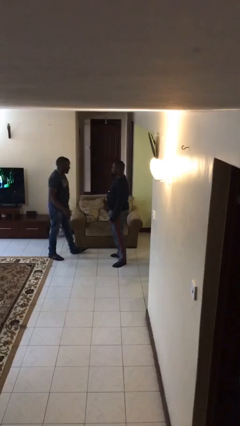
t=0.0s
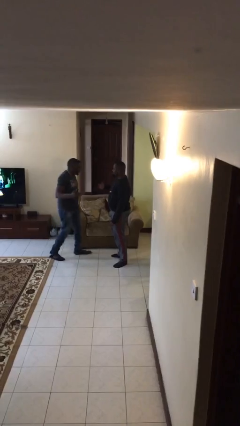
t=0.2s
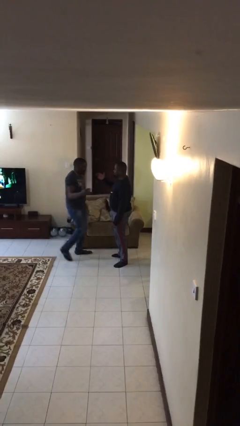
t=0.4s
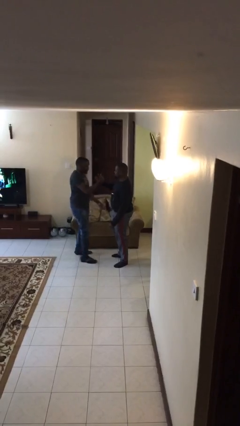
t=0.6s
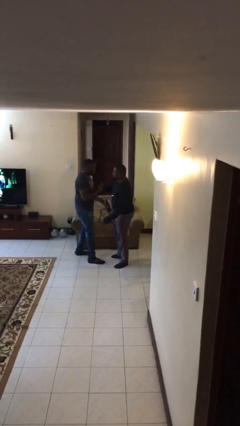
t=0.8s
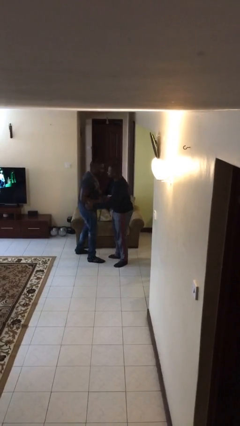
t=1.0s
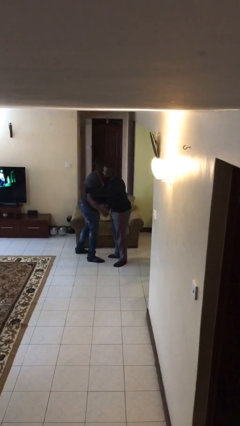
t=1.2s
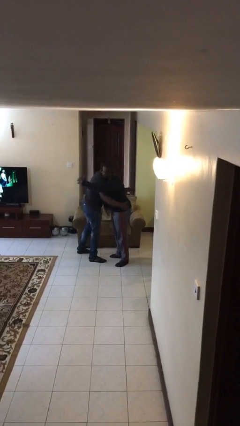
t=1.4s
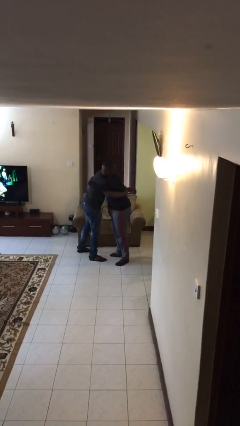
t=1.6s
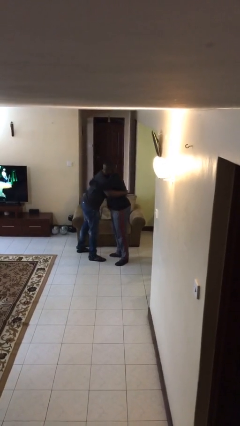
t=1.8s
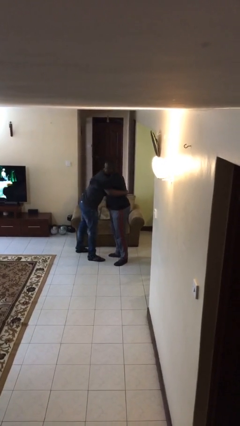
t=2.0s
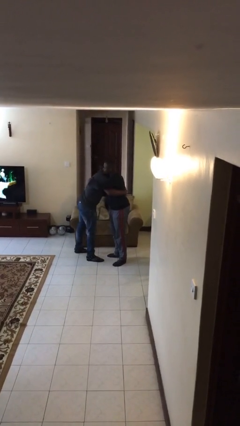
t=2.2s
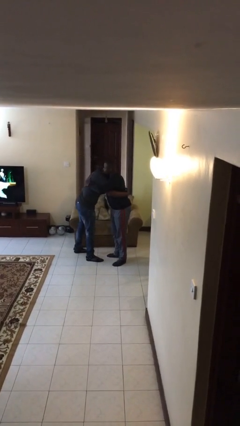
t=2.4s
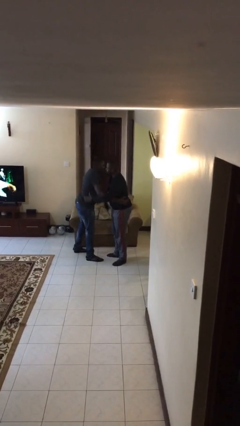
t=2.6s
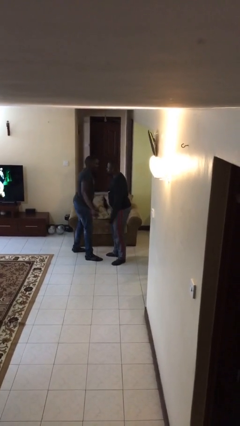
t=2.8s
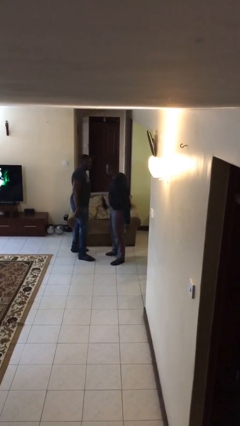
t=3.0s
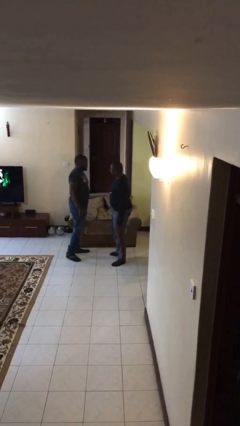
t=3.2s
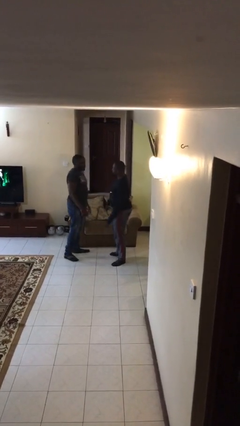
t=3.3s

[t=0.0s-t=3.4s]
person embraces person

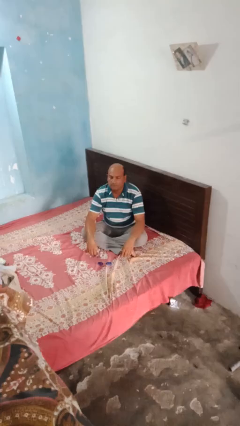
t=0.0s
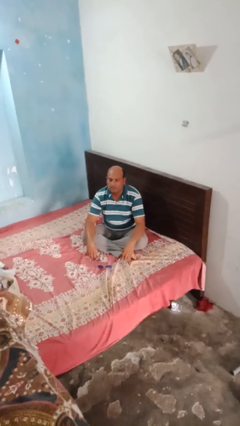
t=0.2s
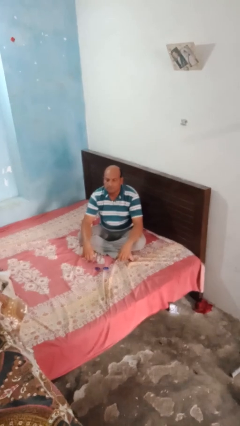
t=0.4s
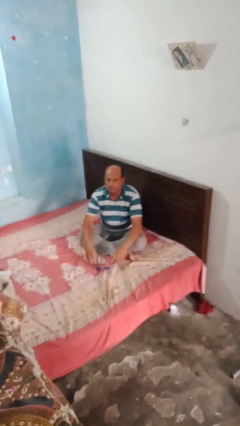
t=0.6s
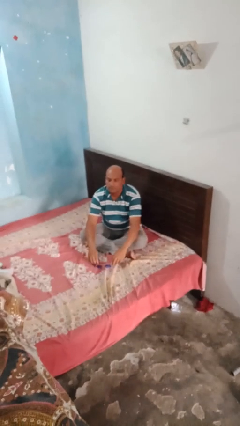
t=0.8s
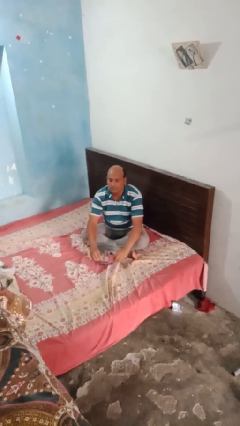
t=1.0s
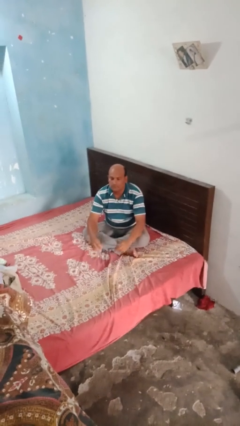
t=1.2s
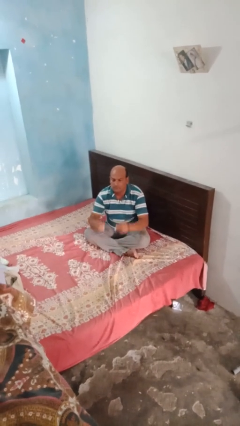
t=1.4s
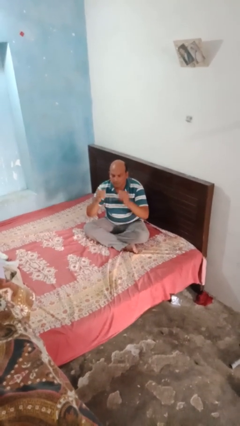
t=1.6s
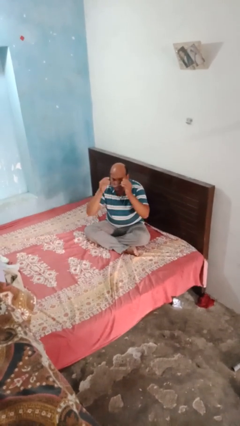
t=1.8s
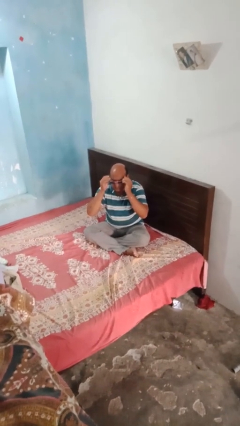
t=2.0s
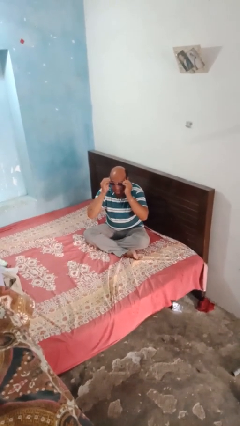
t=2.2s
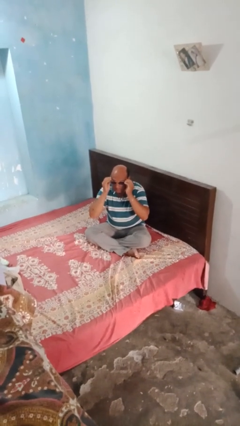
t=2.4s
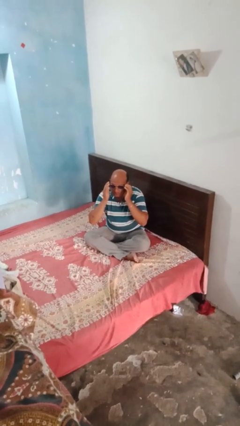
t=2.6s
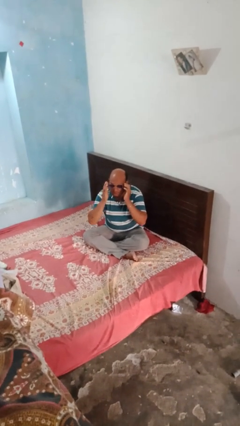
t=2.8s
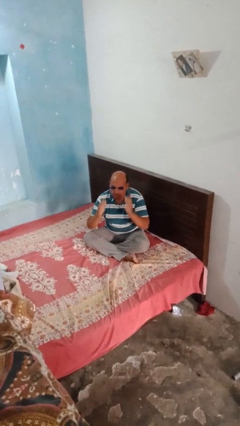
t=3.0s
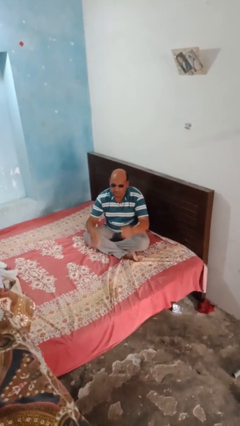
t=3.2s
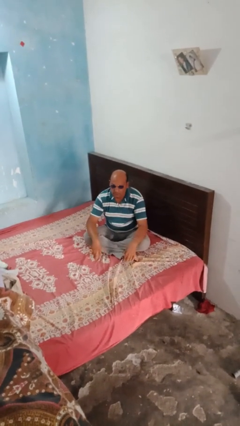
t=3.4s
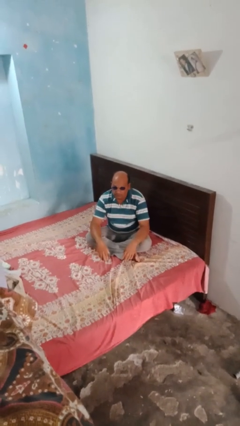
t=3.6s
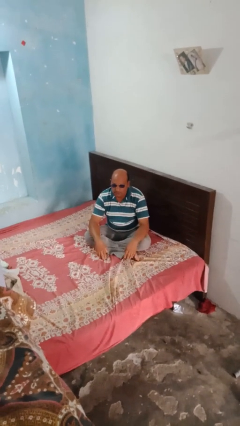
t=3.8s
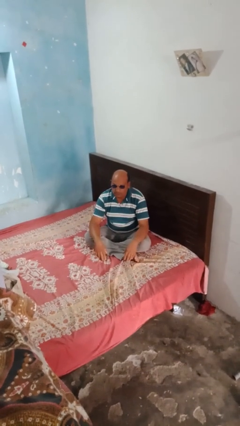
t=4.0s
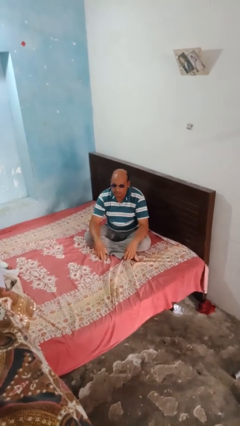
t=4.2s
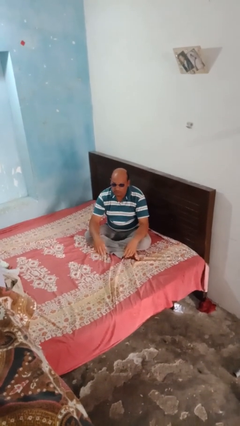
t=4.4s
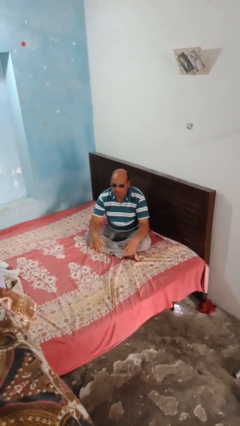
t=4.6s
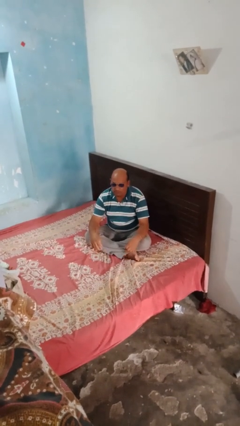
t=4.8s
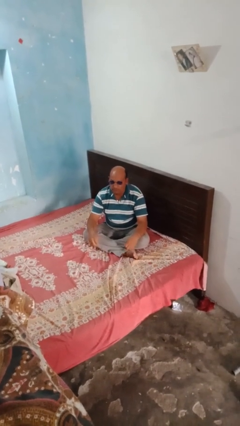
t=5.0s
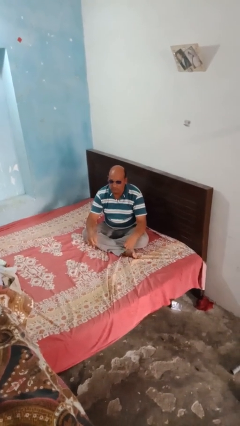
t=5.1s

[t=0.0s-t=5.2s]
person puts on sunglasses

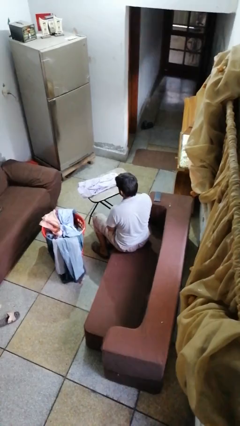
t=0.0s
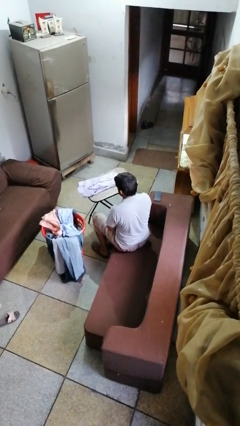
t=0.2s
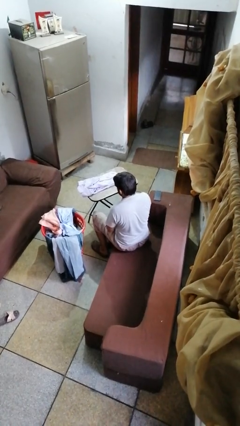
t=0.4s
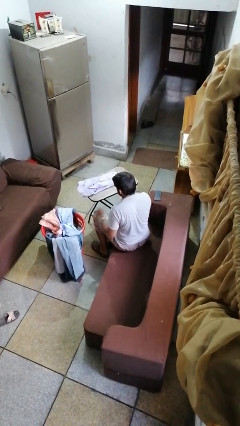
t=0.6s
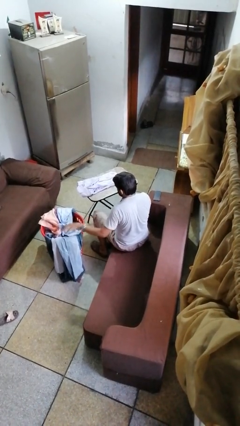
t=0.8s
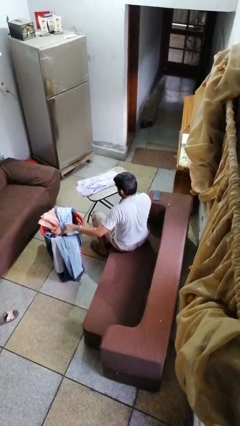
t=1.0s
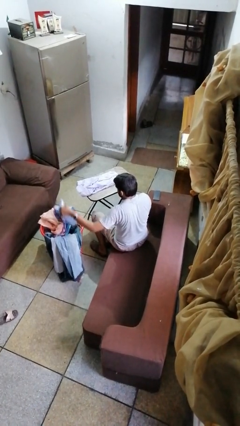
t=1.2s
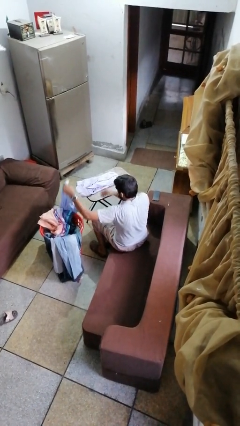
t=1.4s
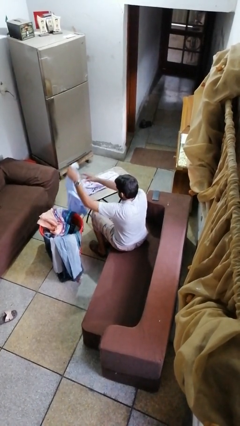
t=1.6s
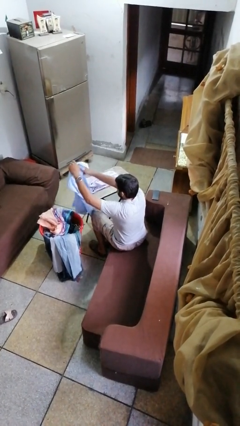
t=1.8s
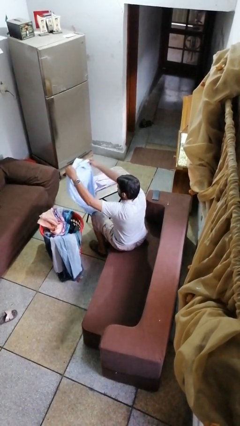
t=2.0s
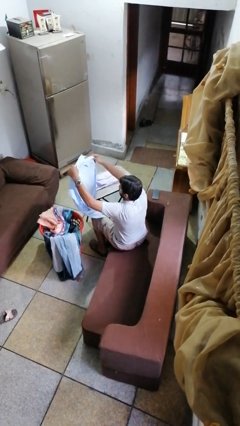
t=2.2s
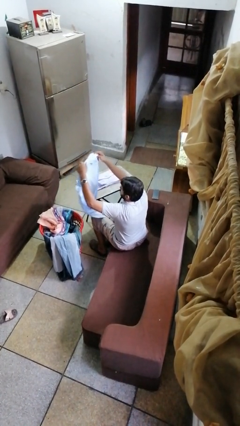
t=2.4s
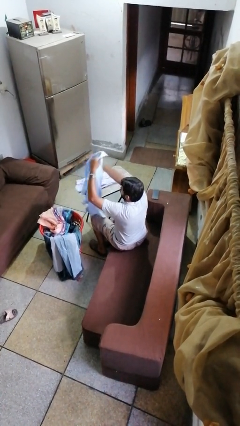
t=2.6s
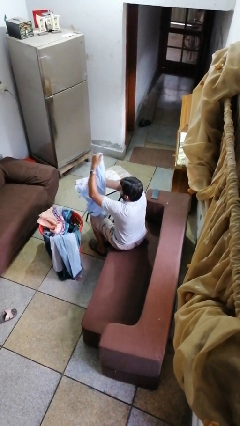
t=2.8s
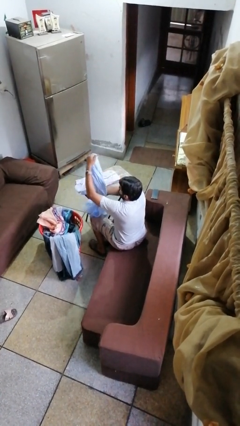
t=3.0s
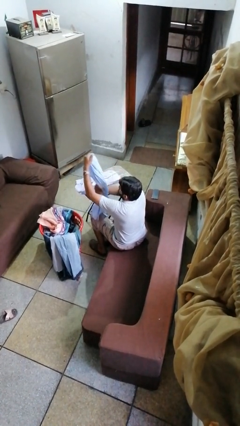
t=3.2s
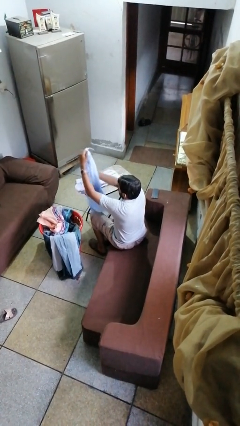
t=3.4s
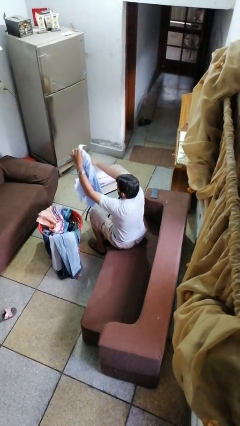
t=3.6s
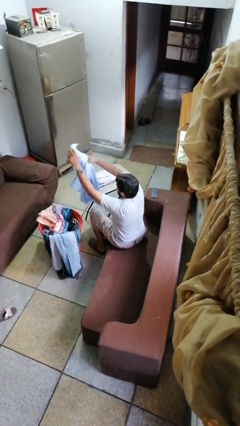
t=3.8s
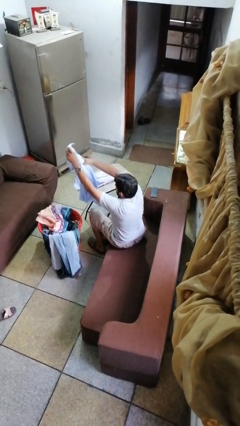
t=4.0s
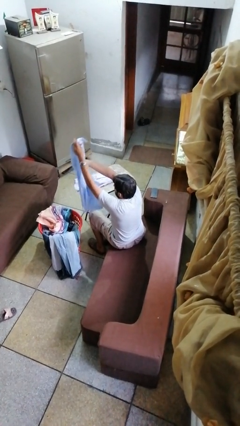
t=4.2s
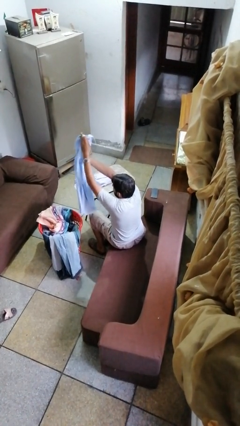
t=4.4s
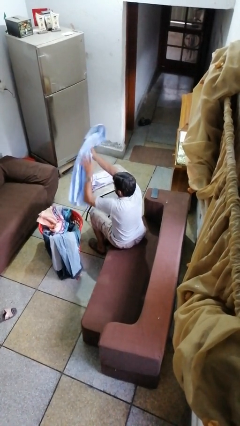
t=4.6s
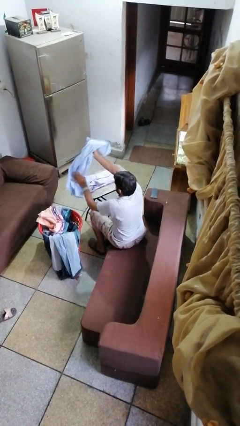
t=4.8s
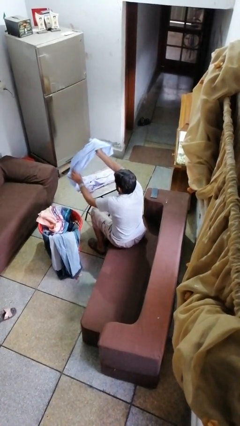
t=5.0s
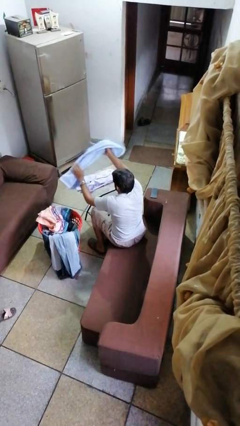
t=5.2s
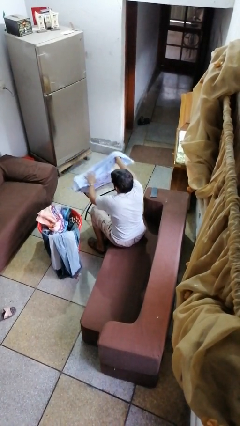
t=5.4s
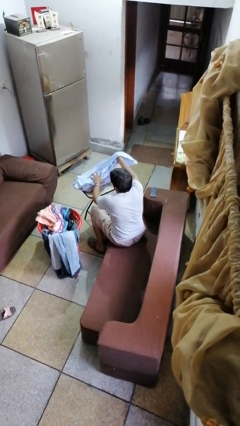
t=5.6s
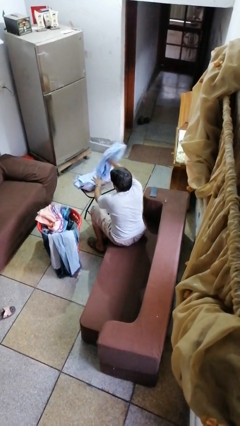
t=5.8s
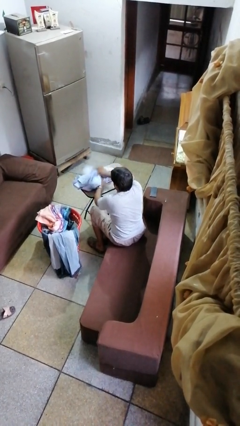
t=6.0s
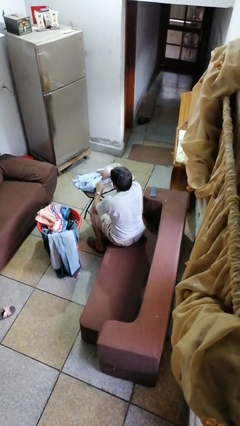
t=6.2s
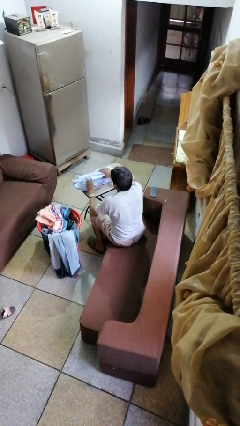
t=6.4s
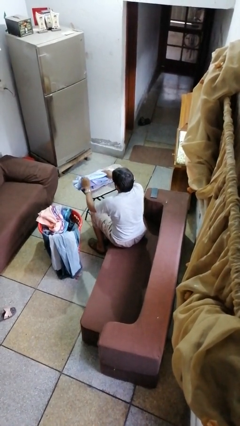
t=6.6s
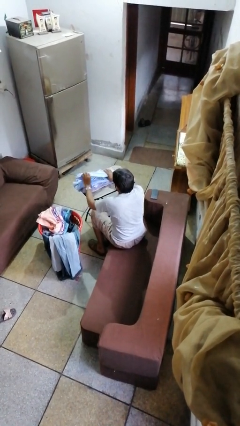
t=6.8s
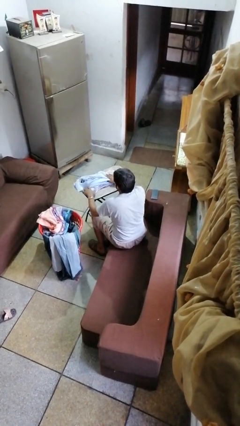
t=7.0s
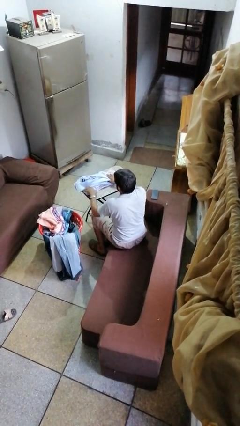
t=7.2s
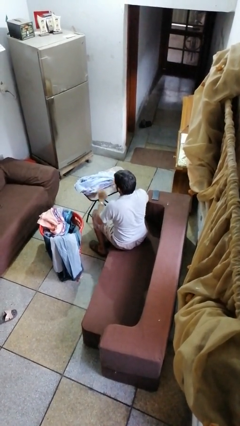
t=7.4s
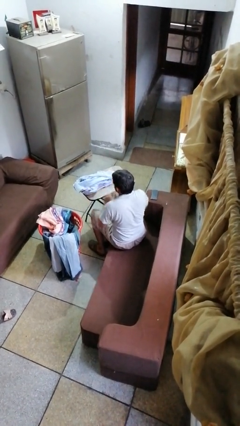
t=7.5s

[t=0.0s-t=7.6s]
person folds shirt

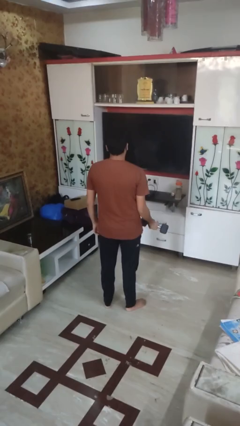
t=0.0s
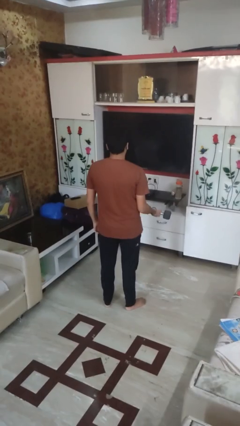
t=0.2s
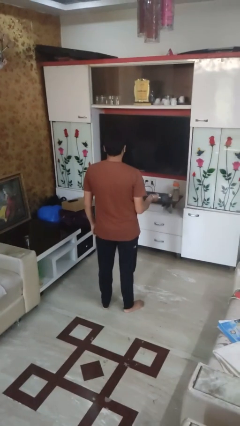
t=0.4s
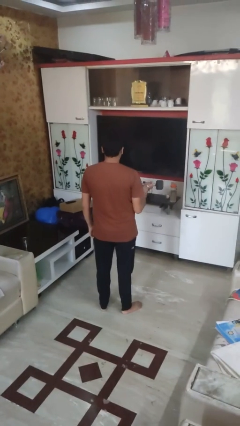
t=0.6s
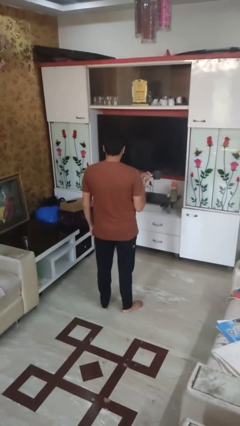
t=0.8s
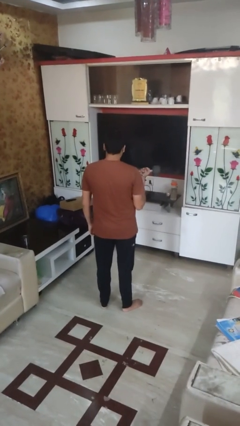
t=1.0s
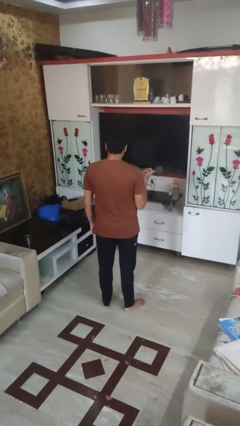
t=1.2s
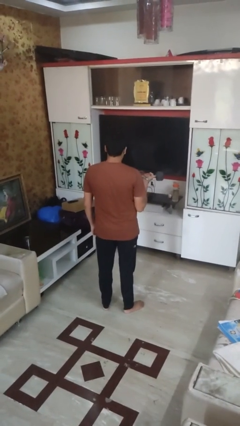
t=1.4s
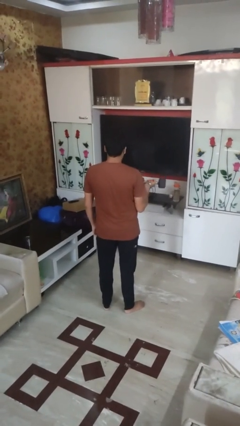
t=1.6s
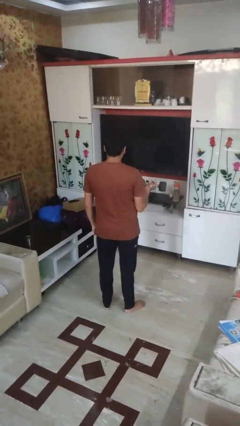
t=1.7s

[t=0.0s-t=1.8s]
person lifts dumbbells
